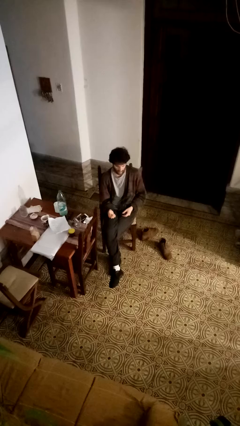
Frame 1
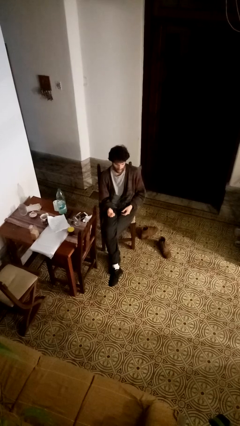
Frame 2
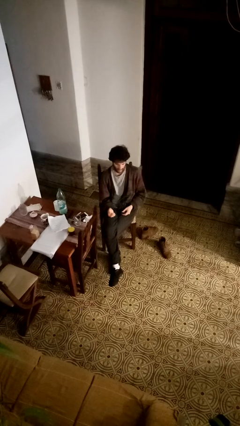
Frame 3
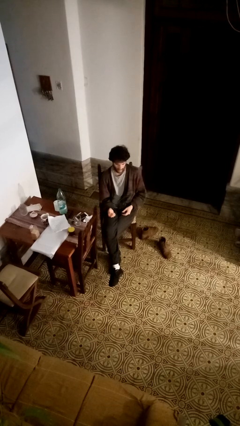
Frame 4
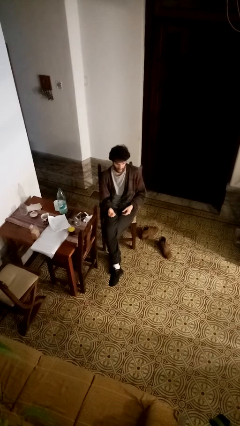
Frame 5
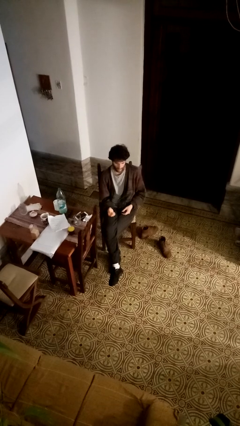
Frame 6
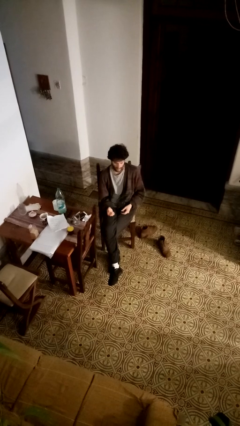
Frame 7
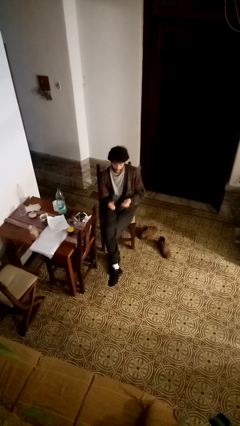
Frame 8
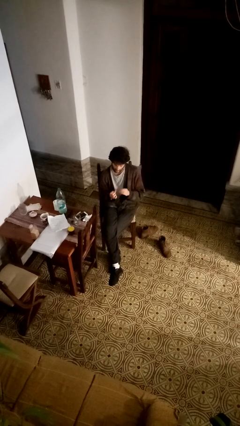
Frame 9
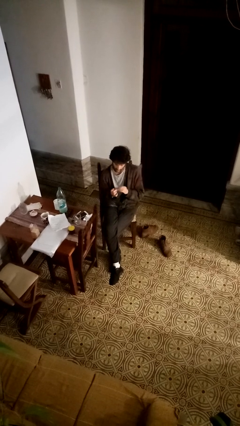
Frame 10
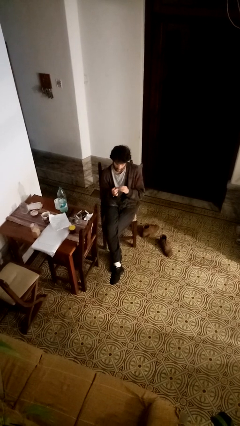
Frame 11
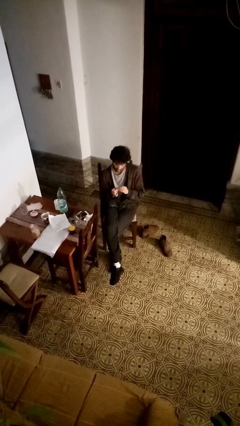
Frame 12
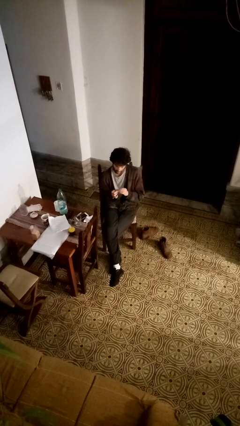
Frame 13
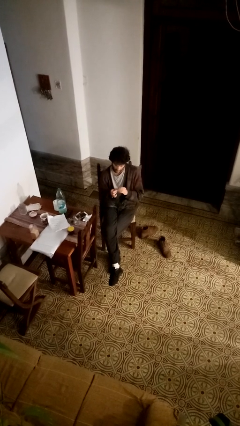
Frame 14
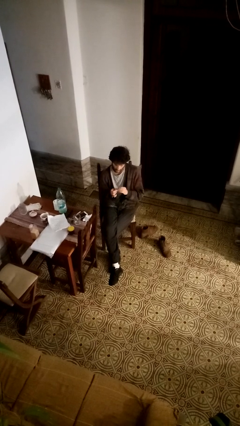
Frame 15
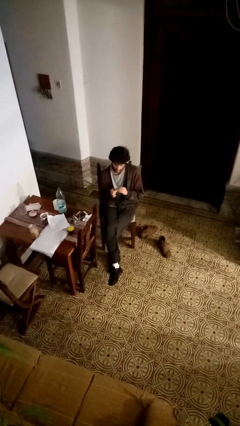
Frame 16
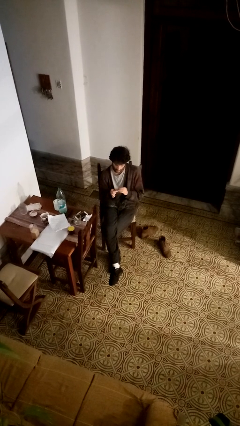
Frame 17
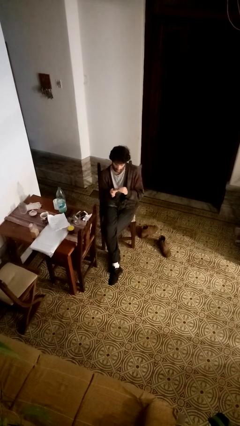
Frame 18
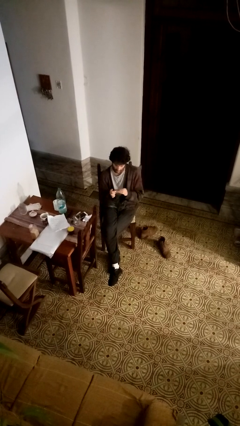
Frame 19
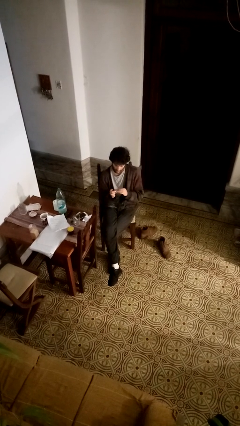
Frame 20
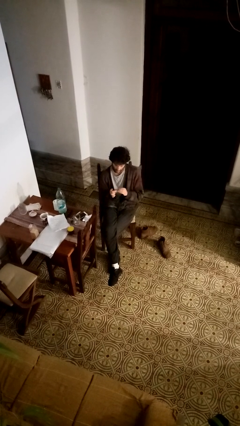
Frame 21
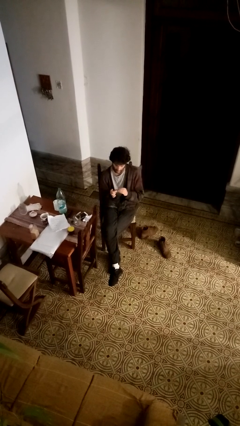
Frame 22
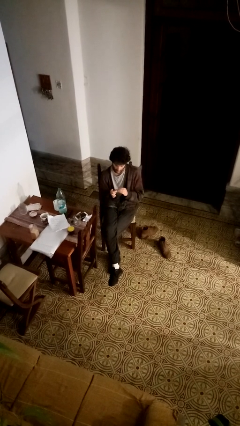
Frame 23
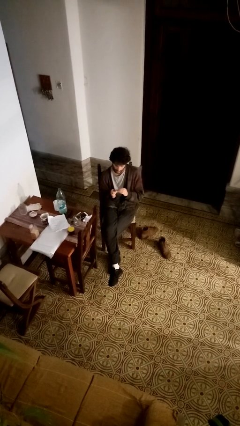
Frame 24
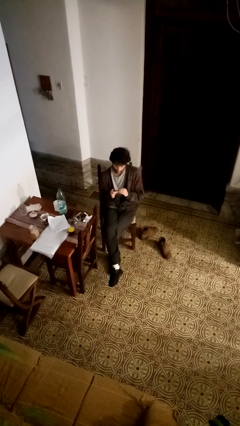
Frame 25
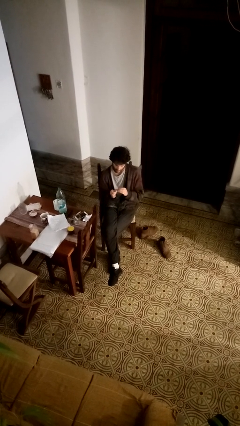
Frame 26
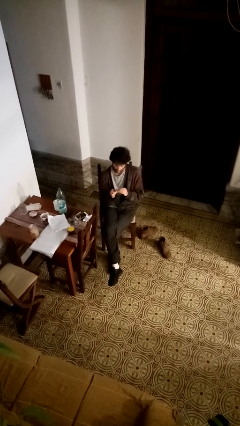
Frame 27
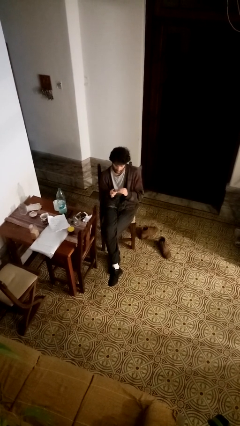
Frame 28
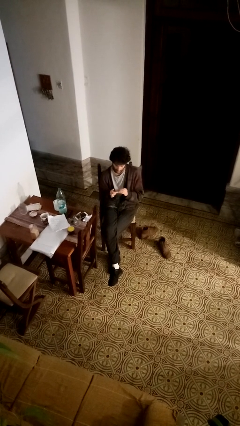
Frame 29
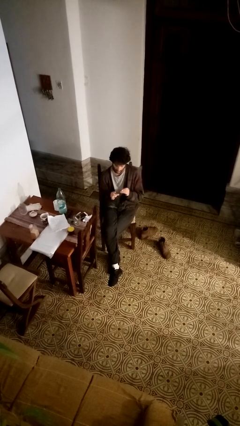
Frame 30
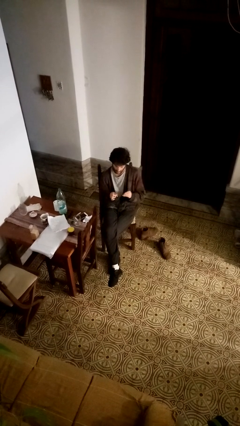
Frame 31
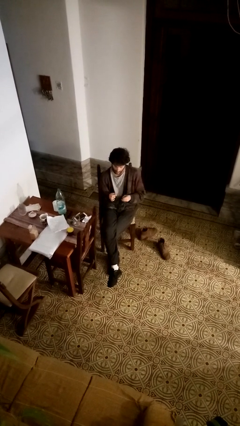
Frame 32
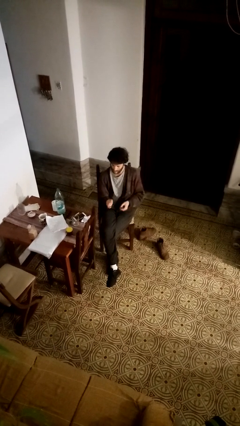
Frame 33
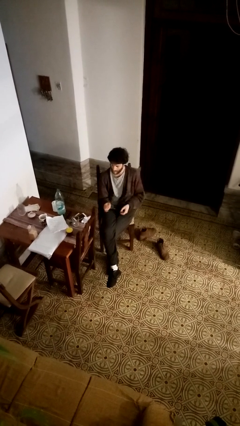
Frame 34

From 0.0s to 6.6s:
person clips fingernails

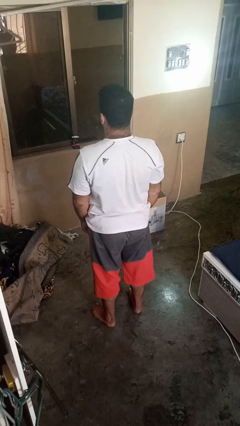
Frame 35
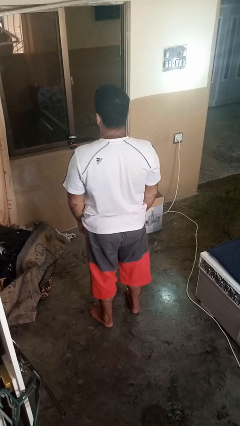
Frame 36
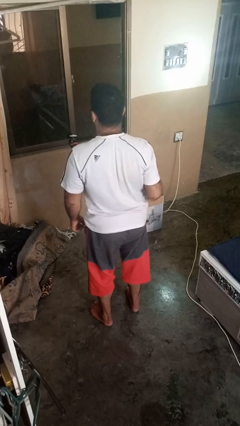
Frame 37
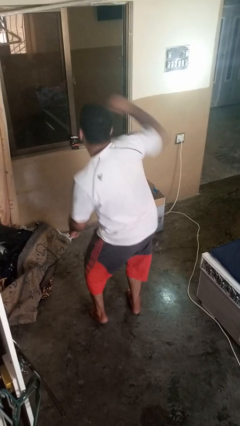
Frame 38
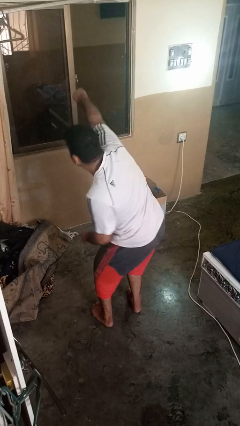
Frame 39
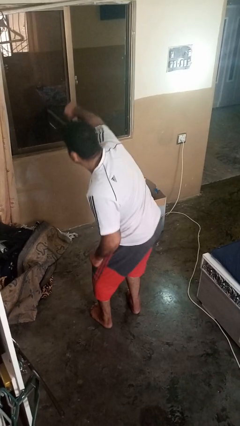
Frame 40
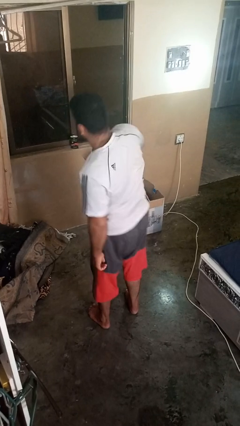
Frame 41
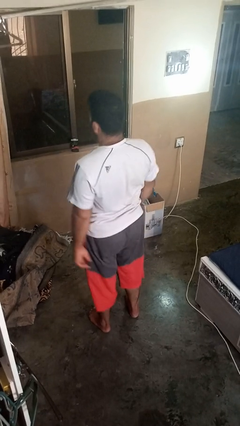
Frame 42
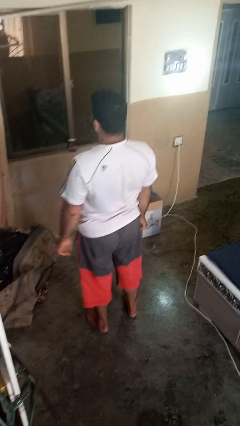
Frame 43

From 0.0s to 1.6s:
person karate chop

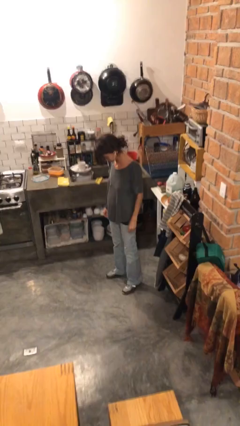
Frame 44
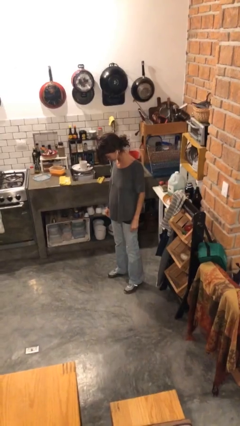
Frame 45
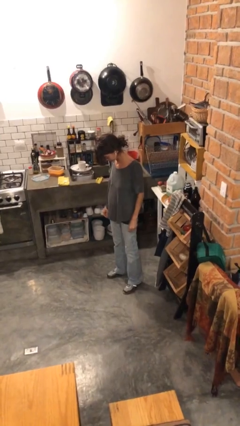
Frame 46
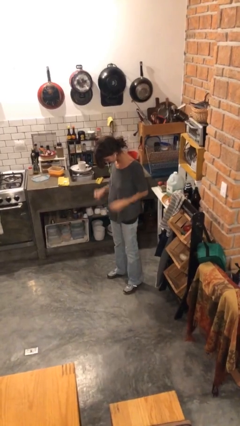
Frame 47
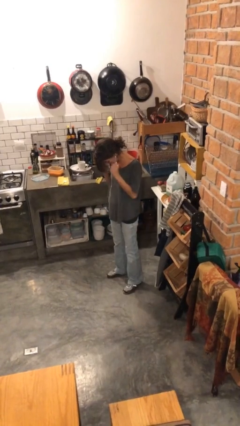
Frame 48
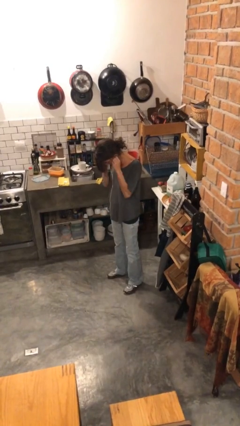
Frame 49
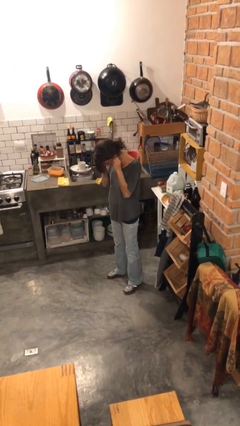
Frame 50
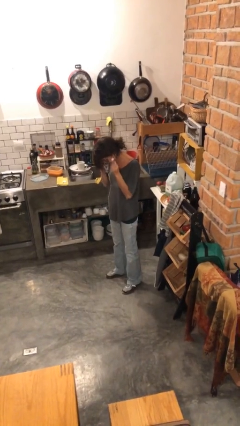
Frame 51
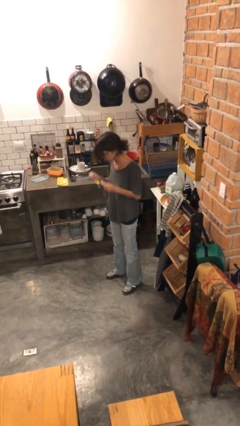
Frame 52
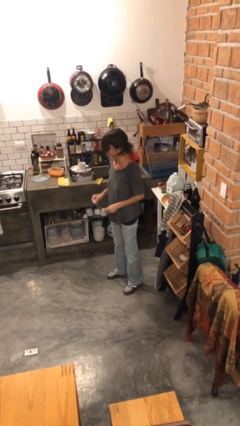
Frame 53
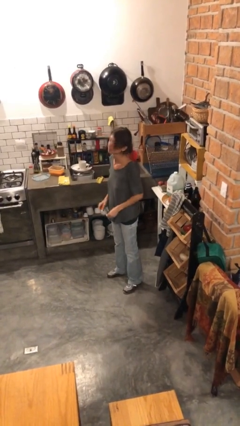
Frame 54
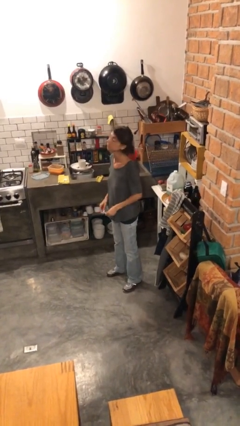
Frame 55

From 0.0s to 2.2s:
person takes off headphones

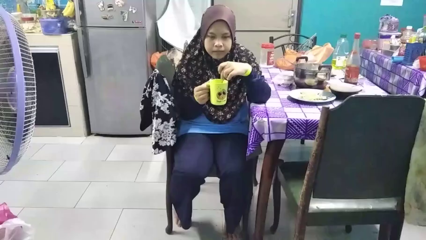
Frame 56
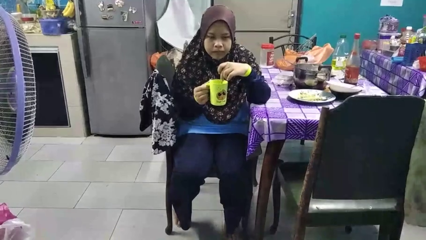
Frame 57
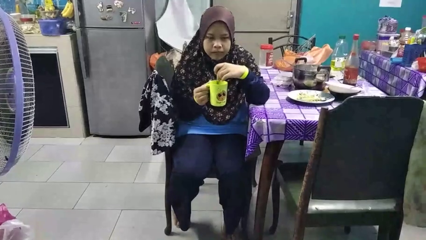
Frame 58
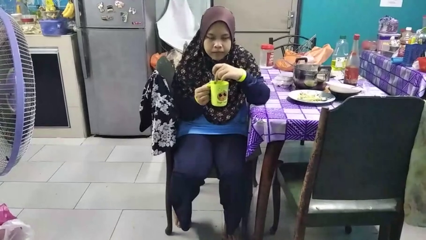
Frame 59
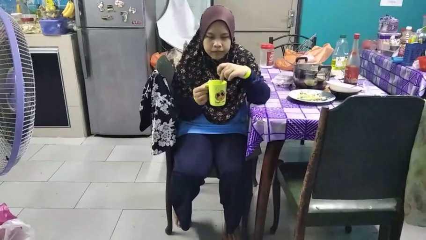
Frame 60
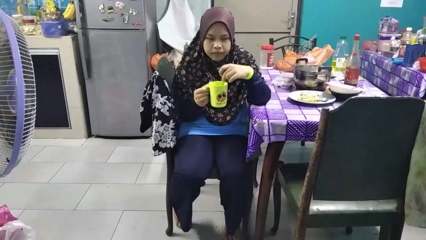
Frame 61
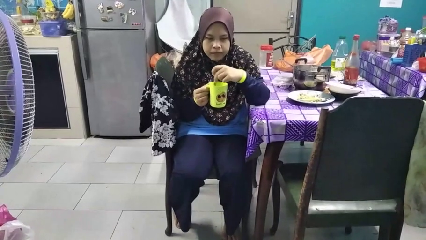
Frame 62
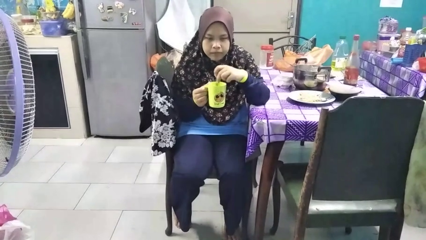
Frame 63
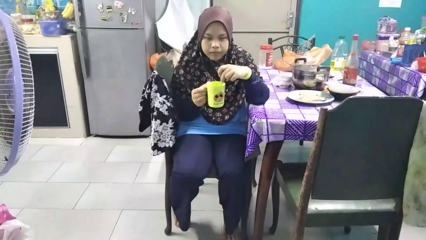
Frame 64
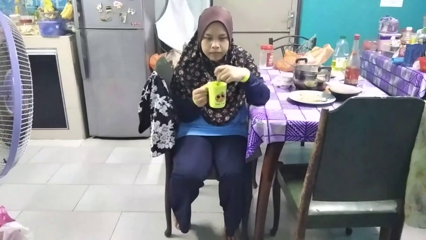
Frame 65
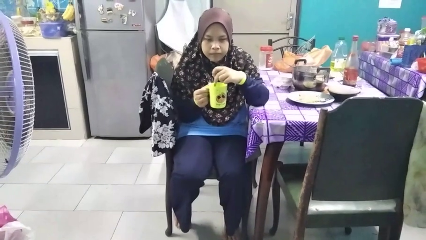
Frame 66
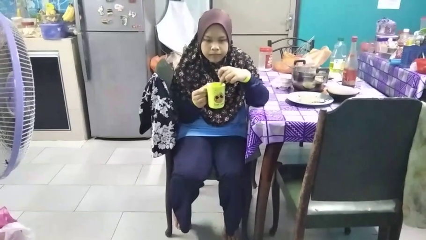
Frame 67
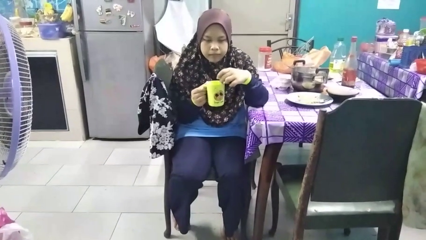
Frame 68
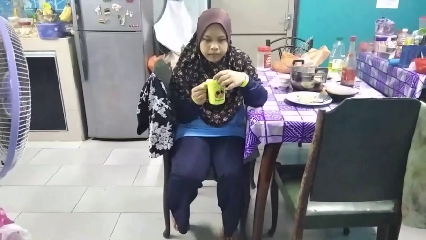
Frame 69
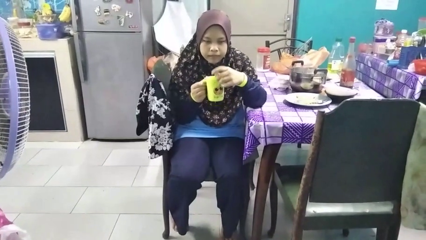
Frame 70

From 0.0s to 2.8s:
person stirs mug

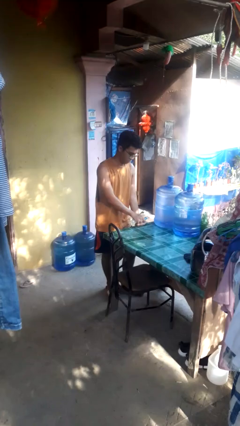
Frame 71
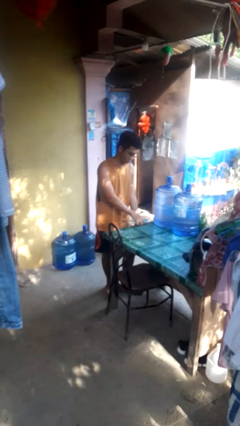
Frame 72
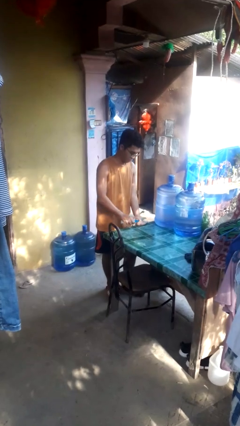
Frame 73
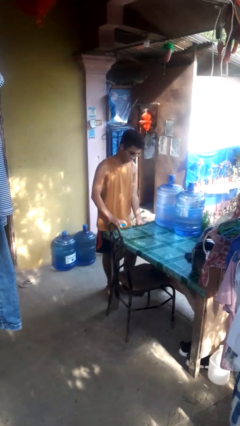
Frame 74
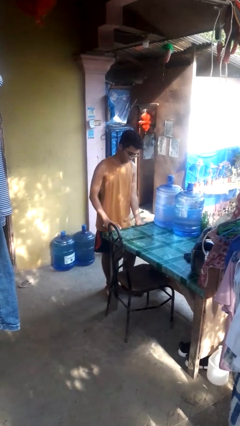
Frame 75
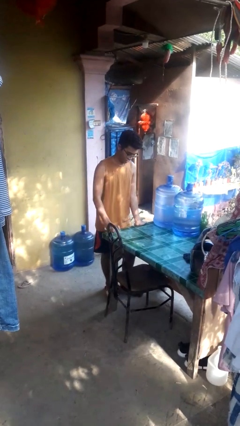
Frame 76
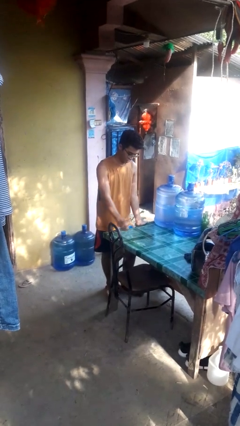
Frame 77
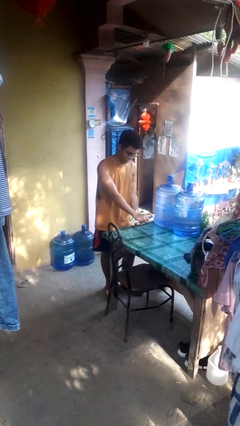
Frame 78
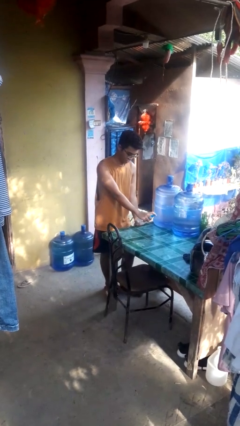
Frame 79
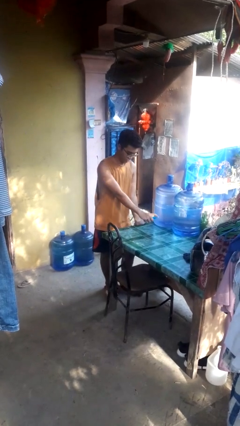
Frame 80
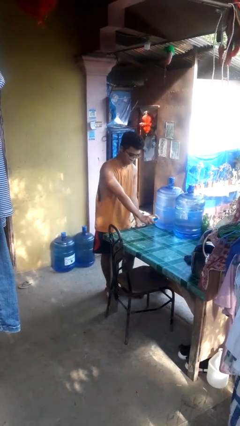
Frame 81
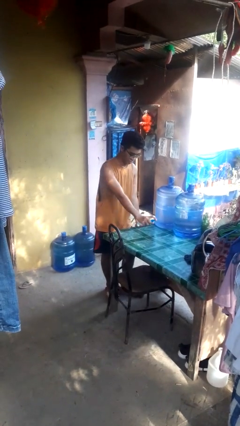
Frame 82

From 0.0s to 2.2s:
person sprays from bottle

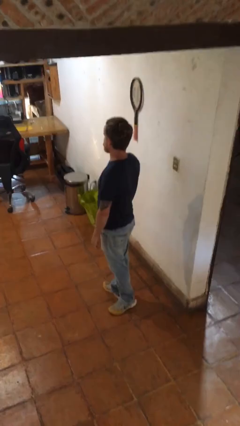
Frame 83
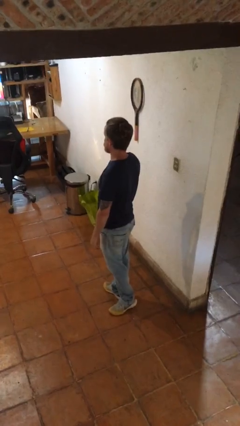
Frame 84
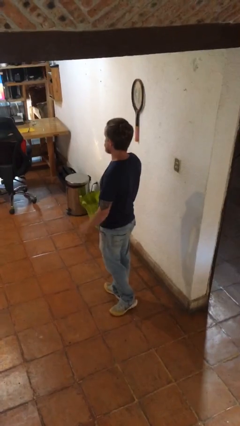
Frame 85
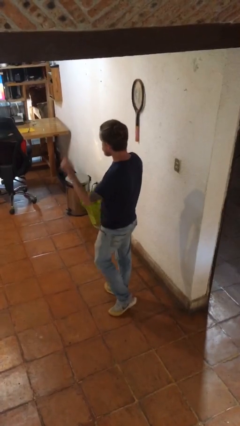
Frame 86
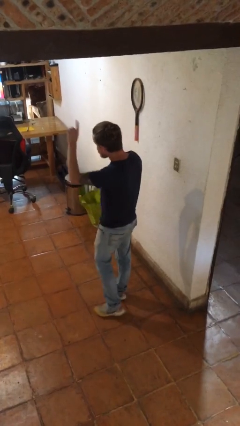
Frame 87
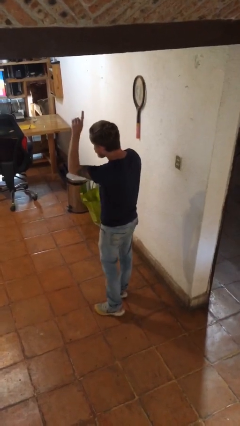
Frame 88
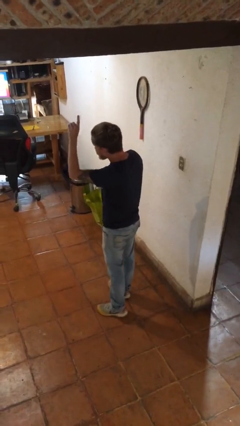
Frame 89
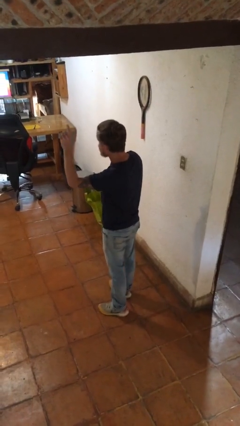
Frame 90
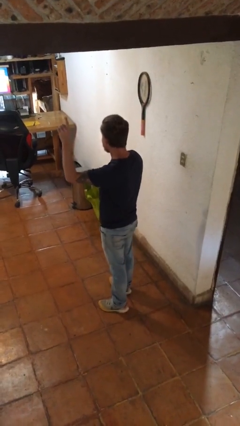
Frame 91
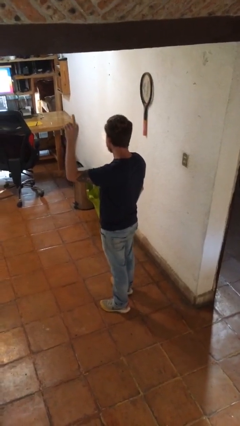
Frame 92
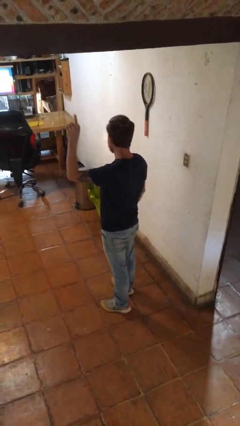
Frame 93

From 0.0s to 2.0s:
person gestures raise hand

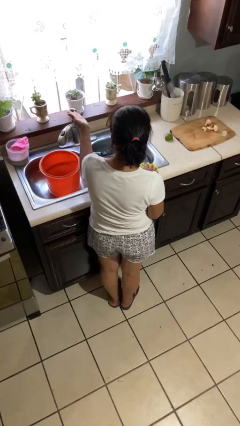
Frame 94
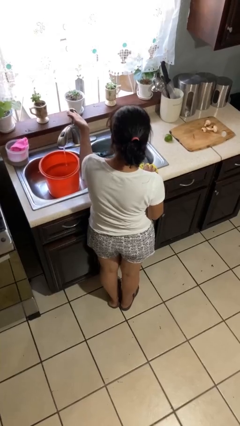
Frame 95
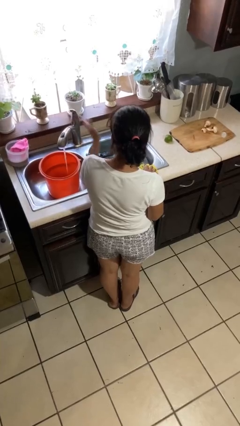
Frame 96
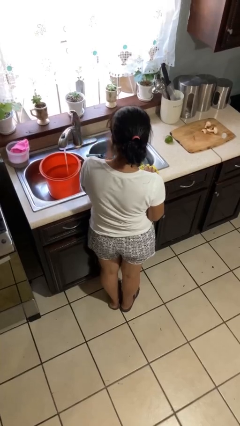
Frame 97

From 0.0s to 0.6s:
person turns on faucet
